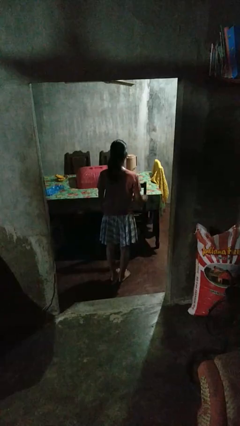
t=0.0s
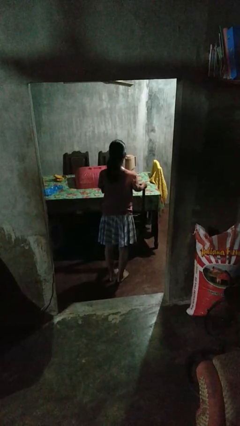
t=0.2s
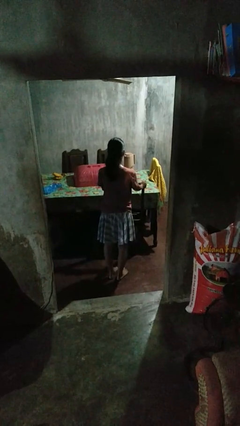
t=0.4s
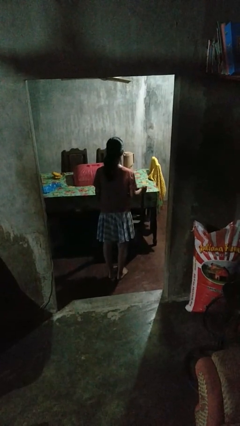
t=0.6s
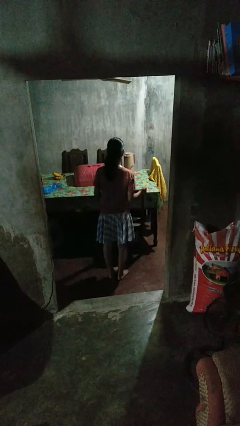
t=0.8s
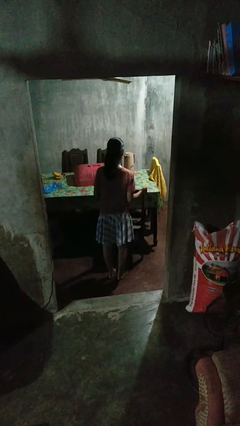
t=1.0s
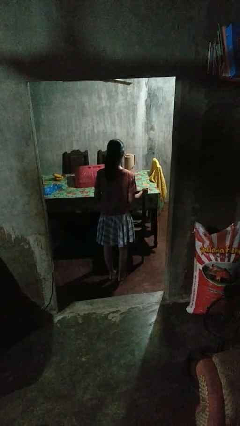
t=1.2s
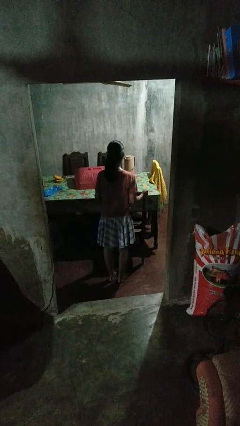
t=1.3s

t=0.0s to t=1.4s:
person pulls out chair

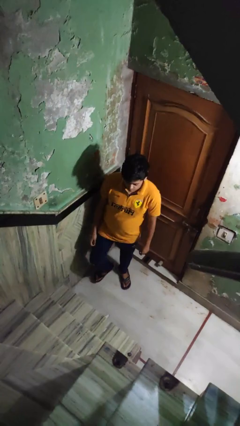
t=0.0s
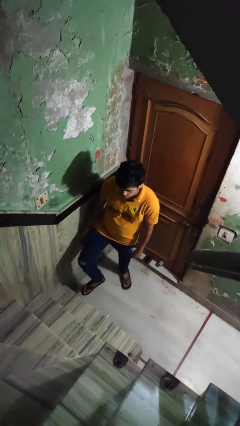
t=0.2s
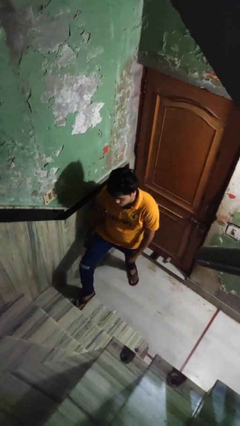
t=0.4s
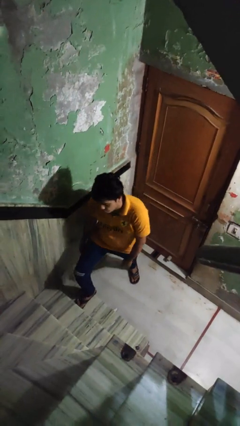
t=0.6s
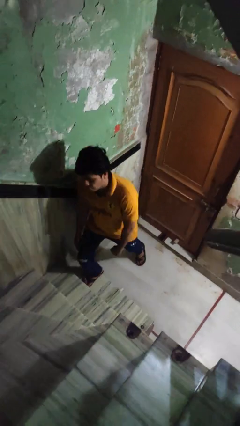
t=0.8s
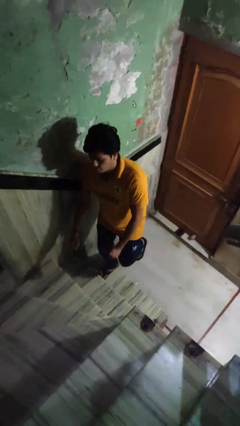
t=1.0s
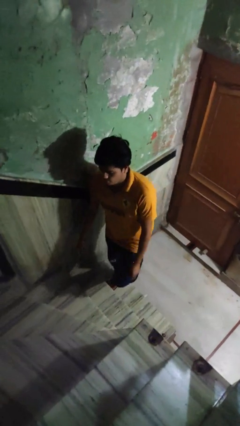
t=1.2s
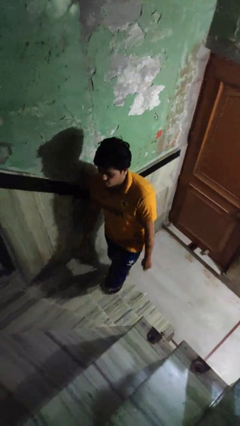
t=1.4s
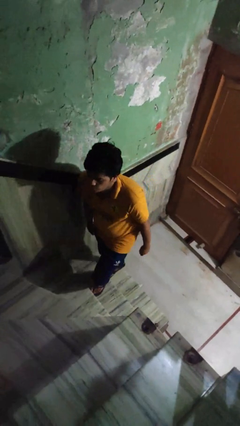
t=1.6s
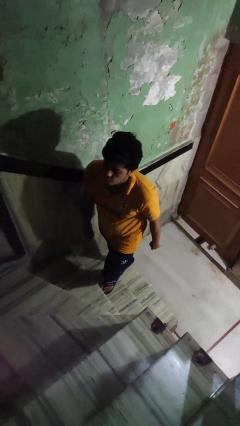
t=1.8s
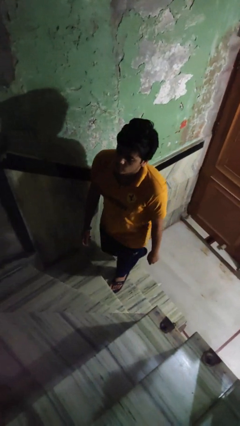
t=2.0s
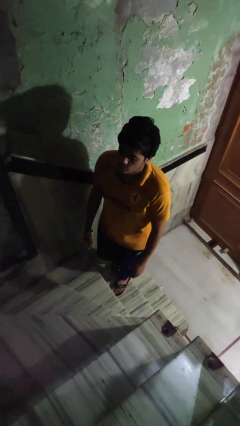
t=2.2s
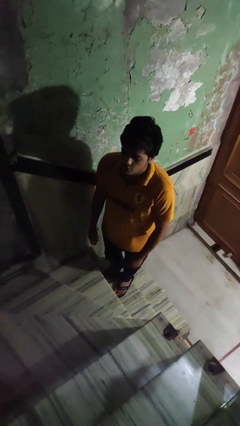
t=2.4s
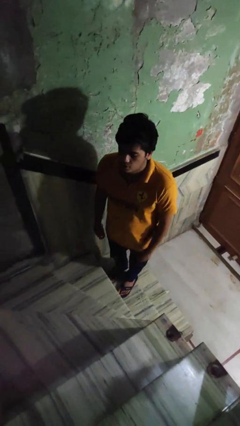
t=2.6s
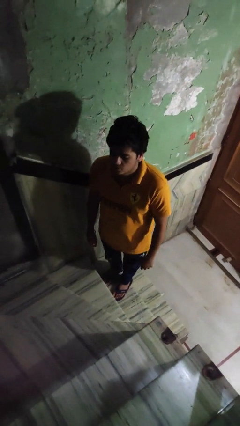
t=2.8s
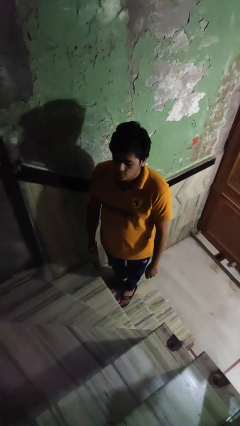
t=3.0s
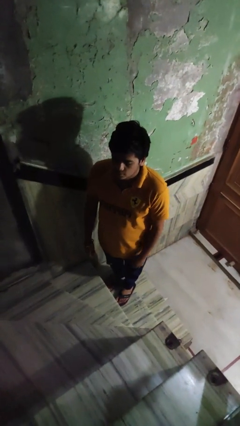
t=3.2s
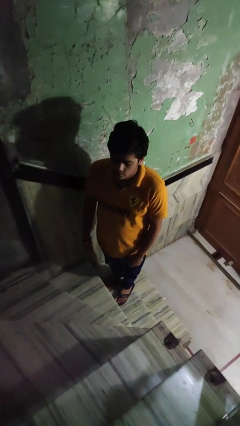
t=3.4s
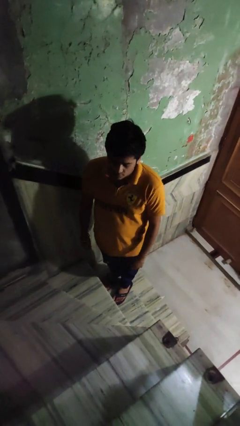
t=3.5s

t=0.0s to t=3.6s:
person climbs up stairs

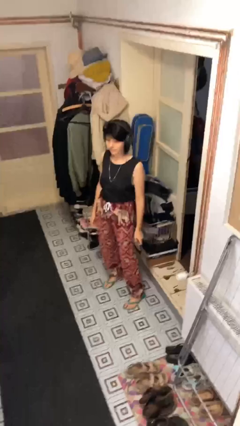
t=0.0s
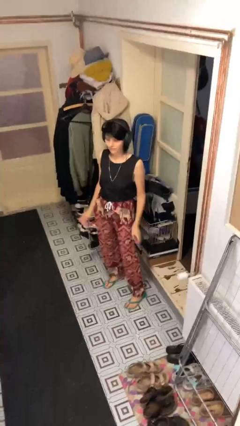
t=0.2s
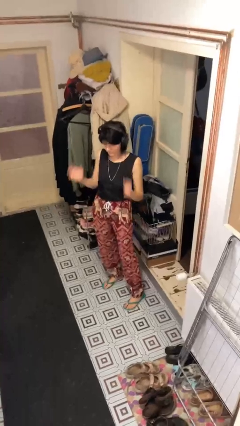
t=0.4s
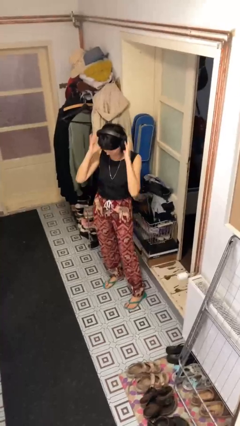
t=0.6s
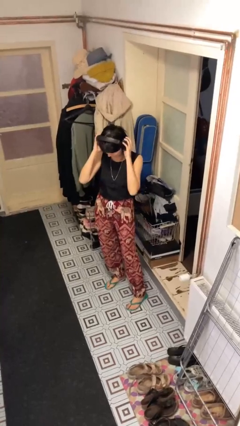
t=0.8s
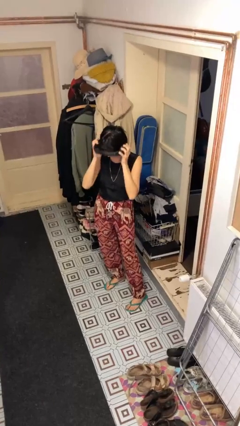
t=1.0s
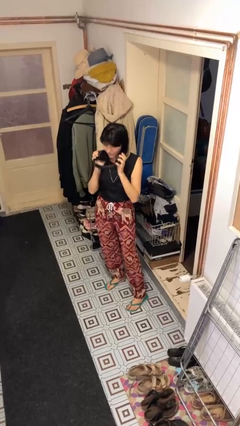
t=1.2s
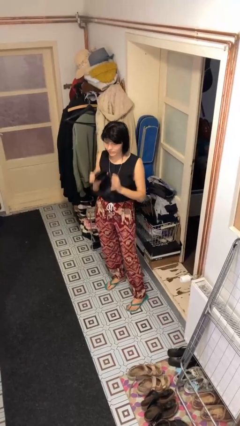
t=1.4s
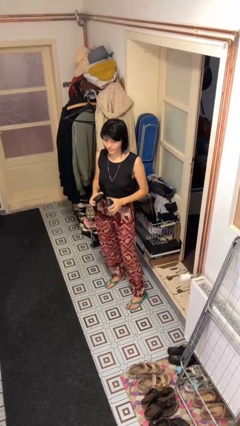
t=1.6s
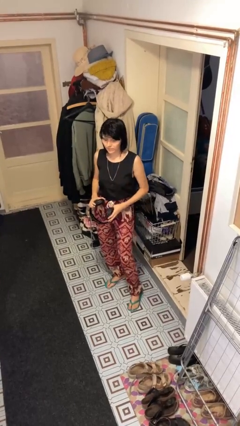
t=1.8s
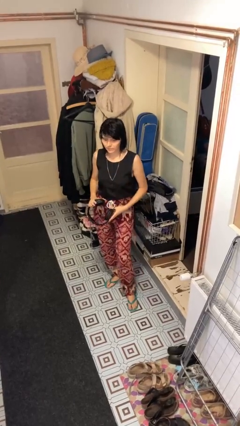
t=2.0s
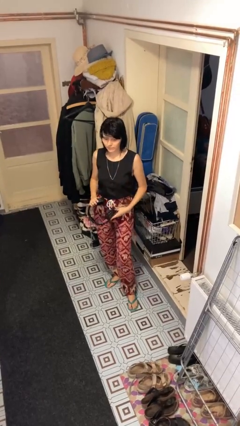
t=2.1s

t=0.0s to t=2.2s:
person takes off headphones

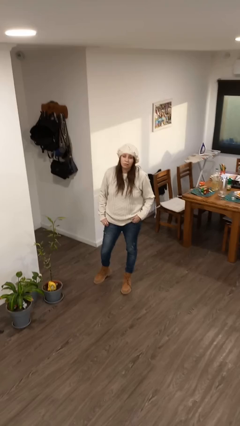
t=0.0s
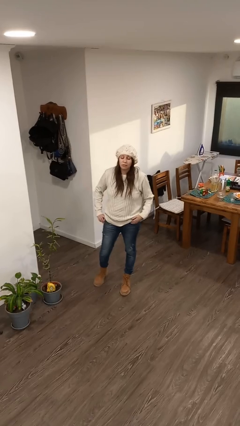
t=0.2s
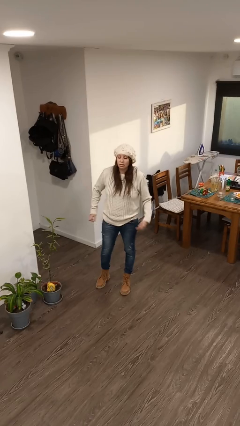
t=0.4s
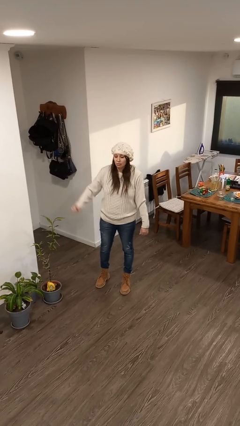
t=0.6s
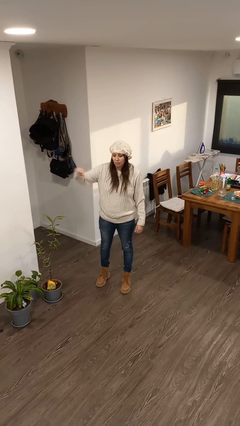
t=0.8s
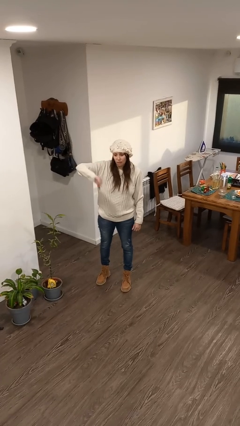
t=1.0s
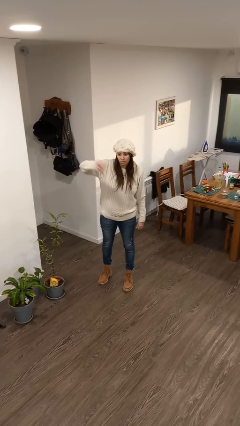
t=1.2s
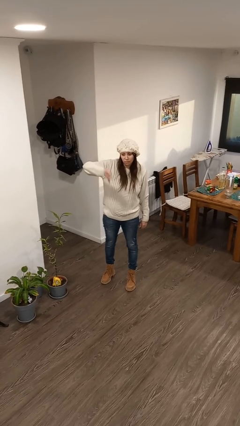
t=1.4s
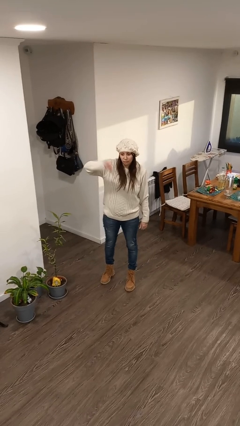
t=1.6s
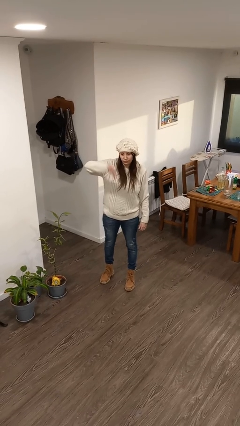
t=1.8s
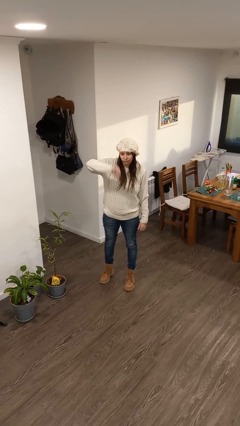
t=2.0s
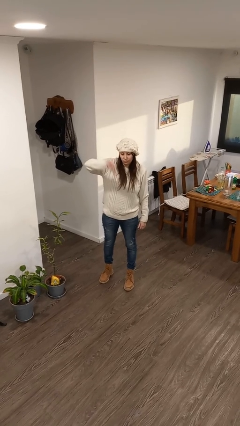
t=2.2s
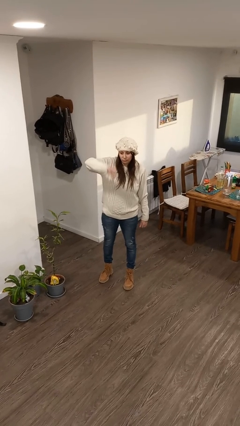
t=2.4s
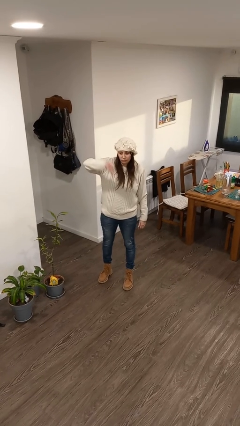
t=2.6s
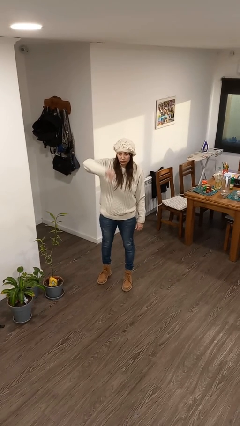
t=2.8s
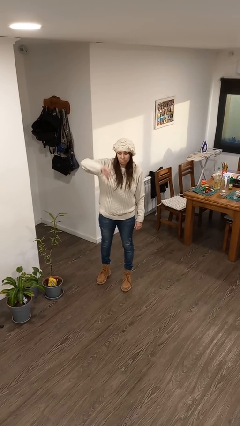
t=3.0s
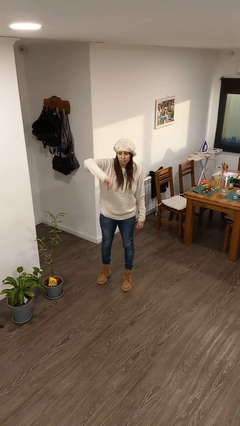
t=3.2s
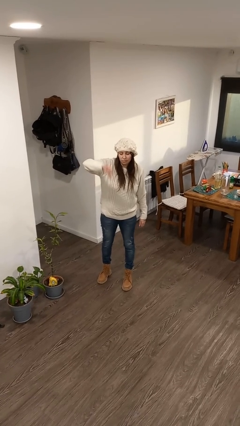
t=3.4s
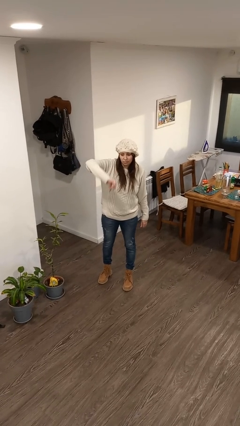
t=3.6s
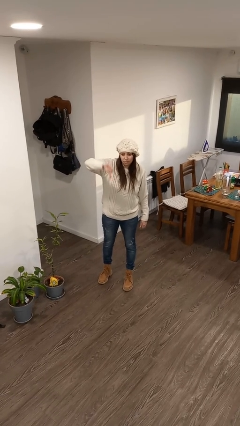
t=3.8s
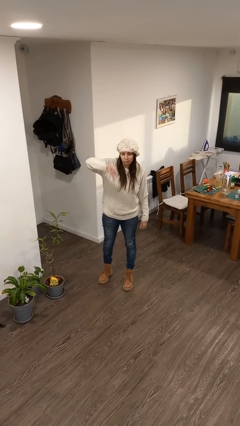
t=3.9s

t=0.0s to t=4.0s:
person gestures thumbs down

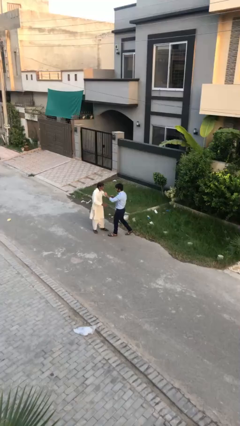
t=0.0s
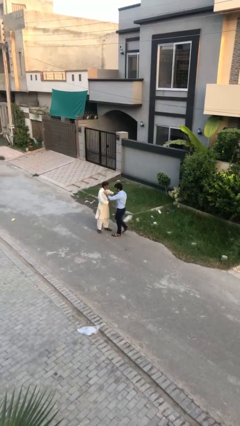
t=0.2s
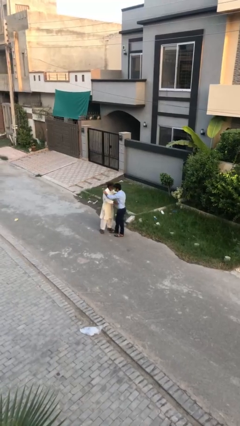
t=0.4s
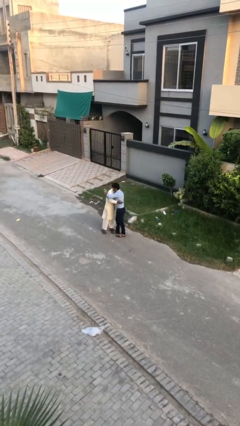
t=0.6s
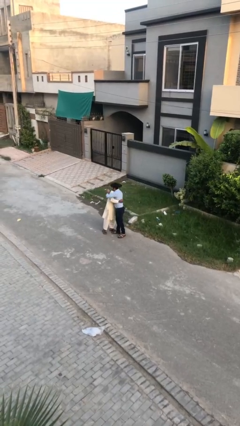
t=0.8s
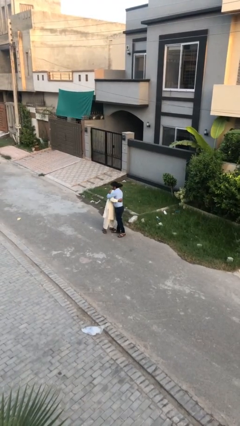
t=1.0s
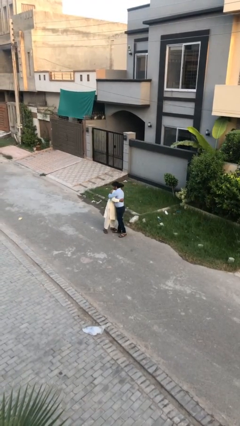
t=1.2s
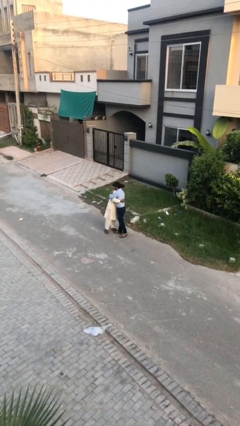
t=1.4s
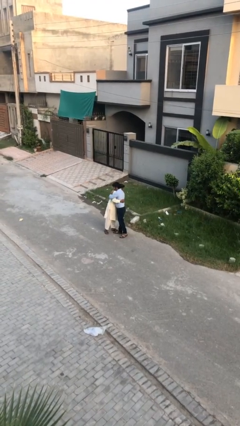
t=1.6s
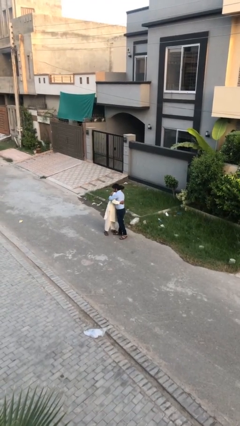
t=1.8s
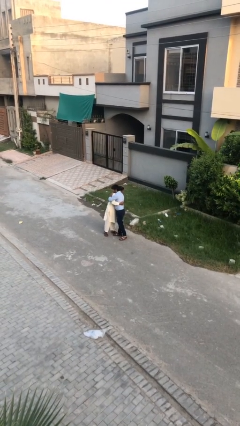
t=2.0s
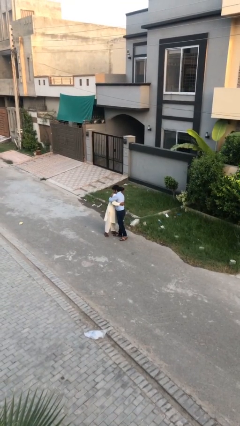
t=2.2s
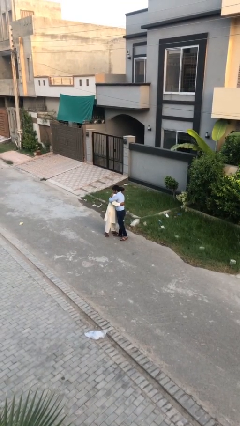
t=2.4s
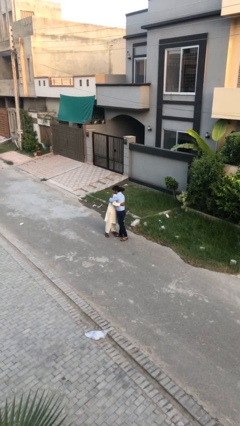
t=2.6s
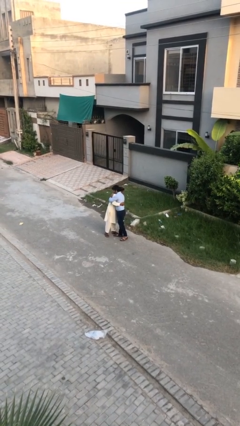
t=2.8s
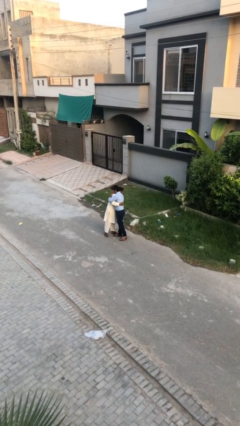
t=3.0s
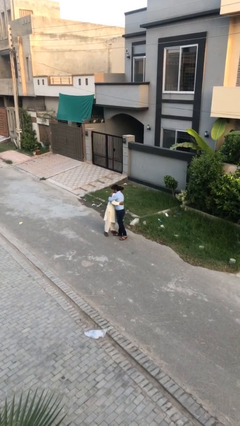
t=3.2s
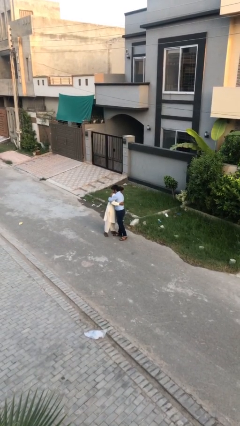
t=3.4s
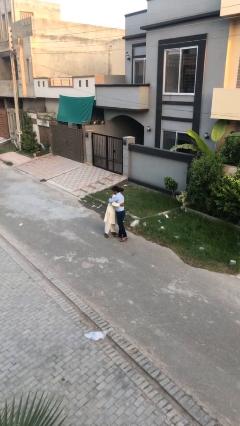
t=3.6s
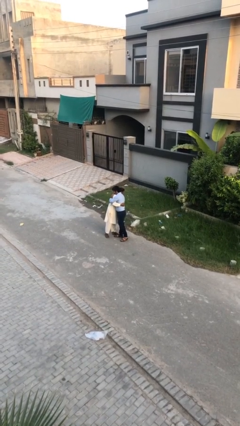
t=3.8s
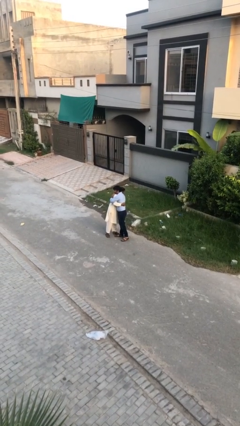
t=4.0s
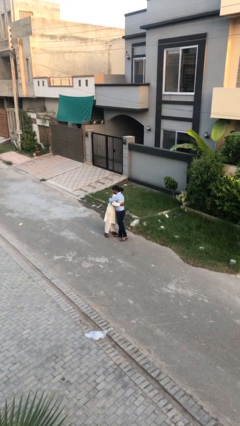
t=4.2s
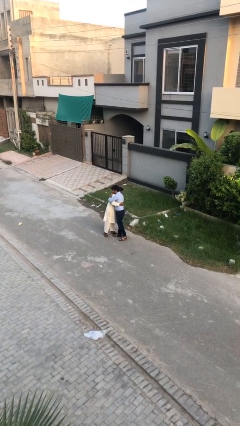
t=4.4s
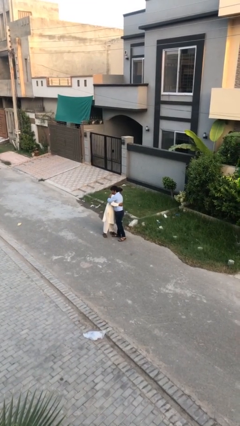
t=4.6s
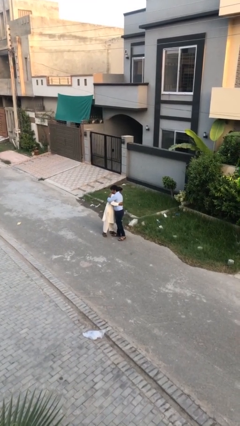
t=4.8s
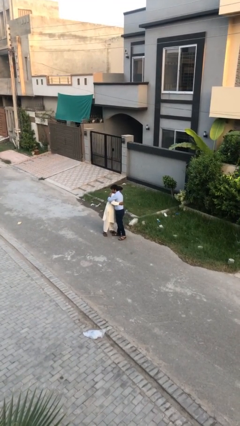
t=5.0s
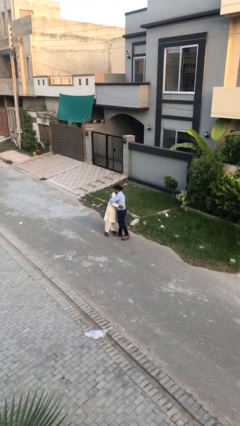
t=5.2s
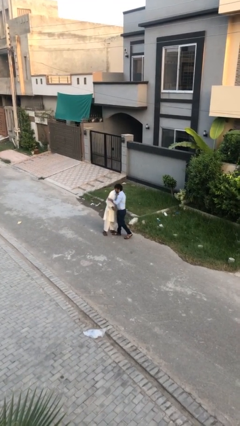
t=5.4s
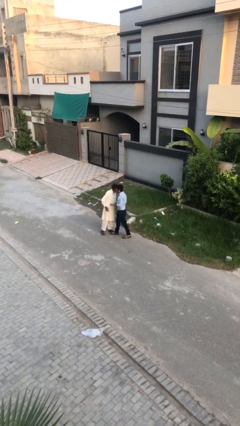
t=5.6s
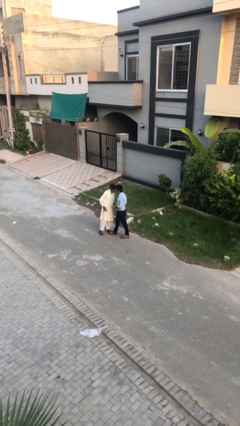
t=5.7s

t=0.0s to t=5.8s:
person embraces person

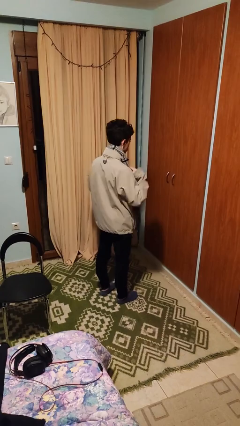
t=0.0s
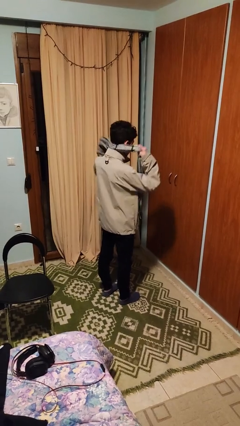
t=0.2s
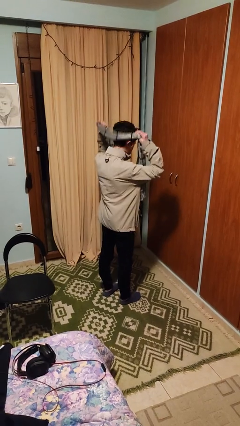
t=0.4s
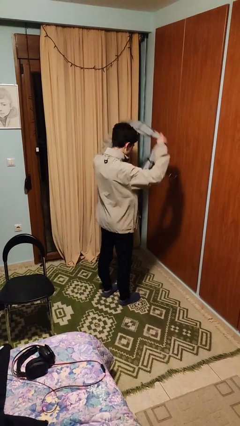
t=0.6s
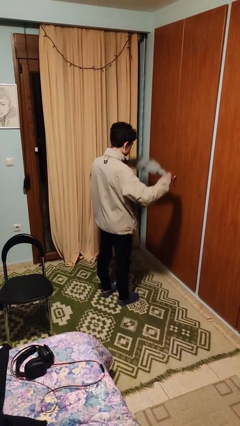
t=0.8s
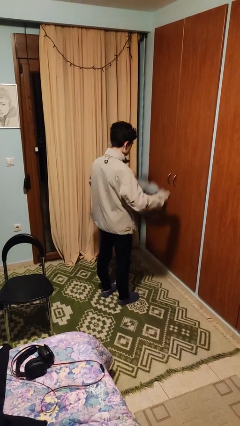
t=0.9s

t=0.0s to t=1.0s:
person takes off scarf
